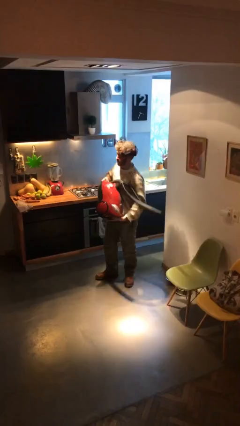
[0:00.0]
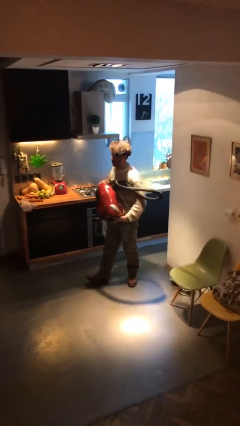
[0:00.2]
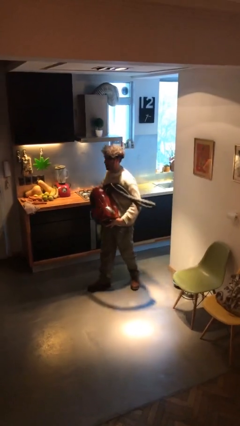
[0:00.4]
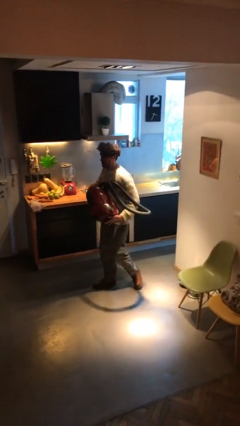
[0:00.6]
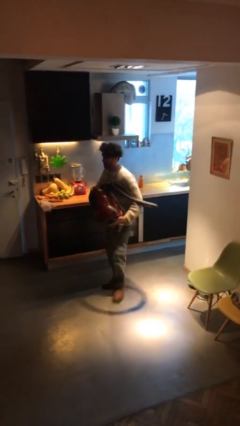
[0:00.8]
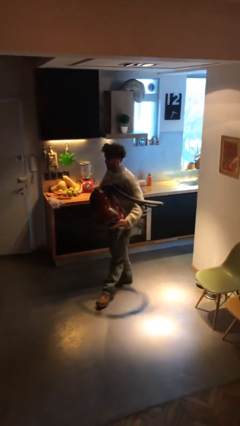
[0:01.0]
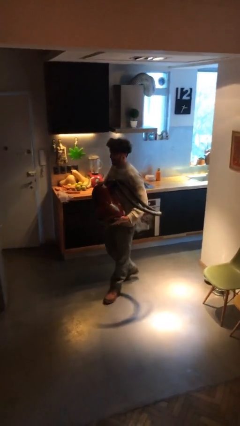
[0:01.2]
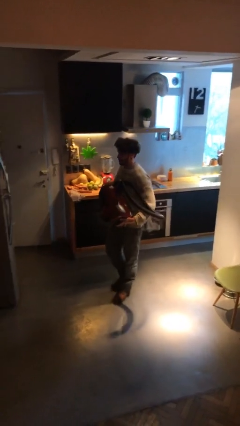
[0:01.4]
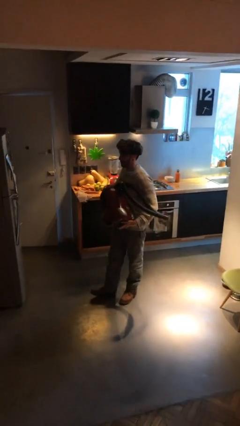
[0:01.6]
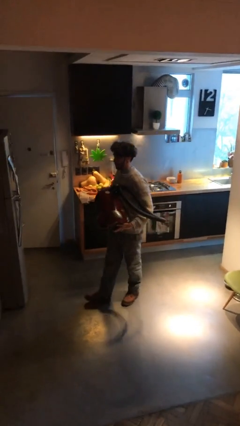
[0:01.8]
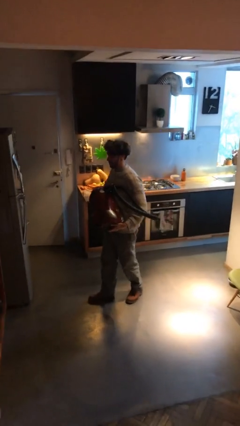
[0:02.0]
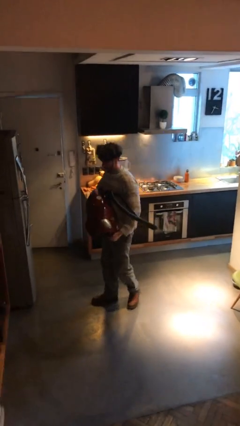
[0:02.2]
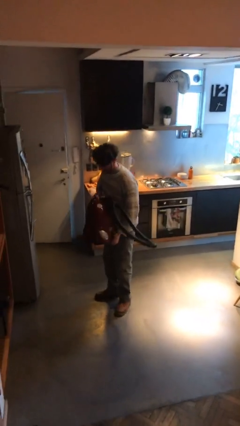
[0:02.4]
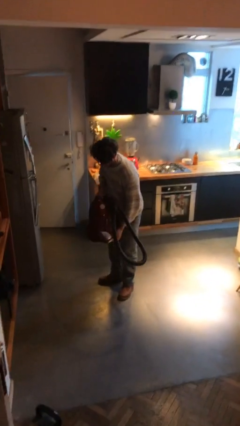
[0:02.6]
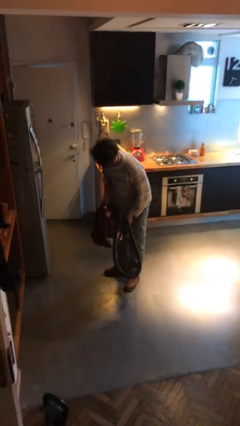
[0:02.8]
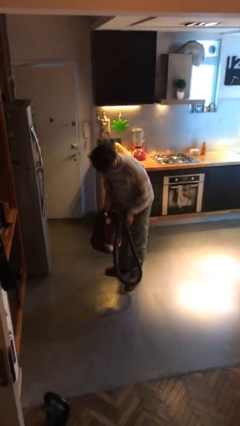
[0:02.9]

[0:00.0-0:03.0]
person carries heavy object

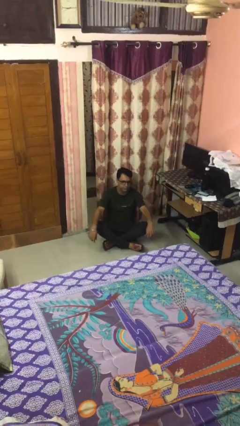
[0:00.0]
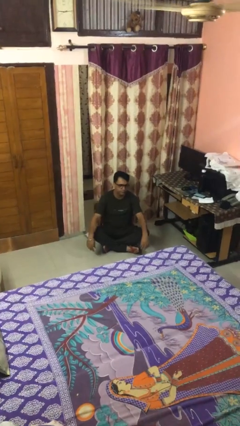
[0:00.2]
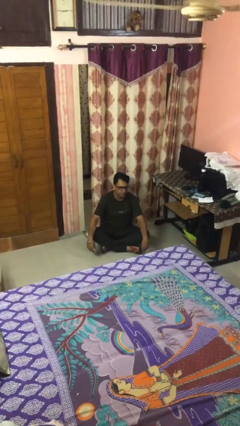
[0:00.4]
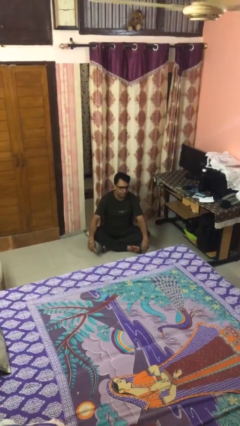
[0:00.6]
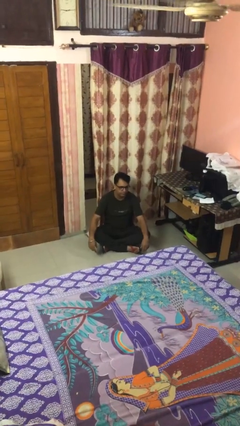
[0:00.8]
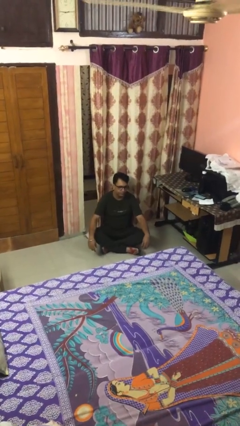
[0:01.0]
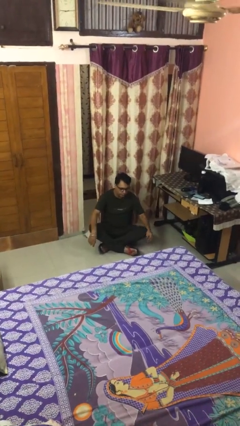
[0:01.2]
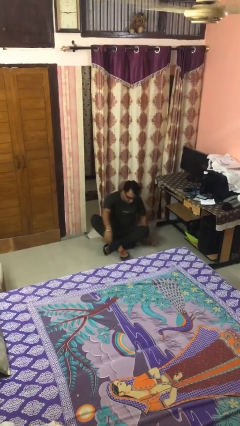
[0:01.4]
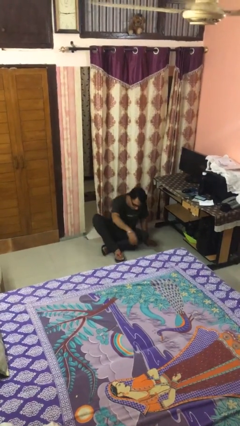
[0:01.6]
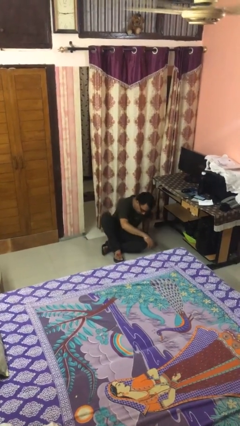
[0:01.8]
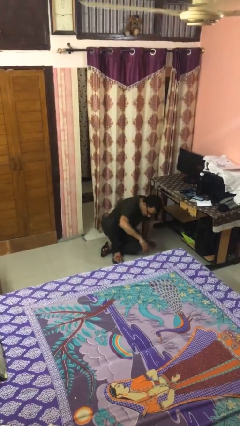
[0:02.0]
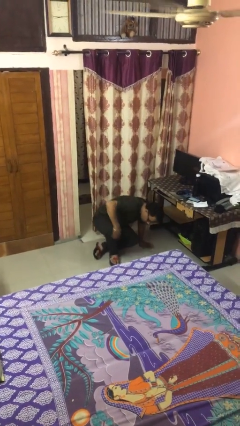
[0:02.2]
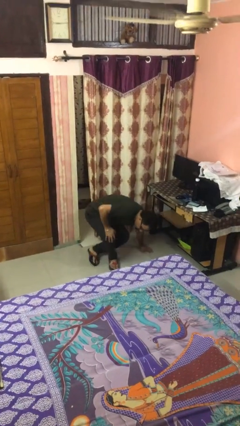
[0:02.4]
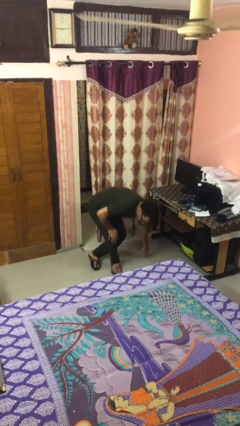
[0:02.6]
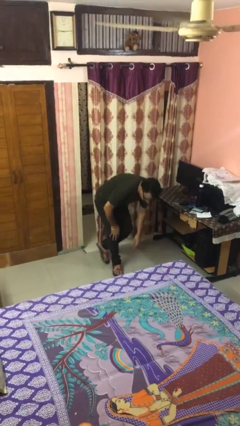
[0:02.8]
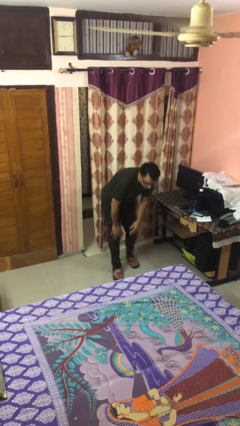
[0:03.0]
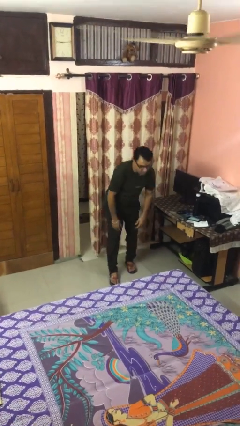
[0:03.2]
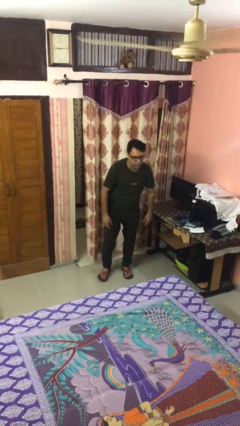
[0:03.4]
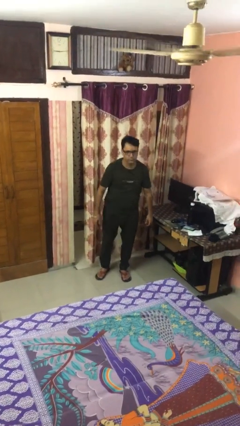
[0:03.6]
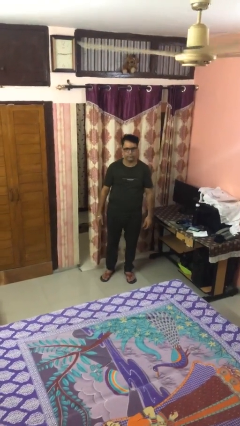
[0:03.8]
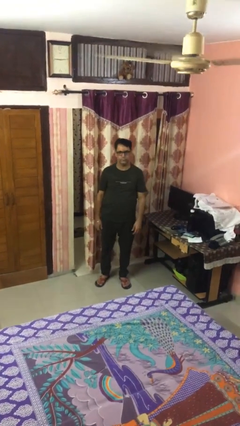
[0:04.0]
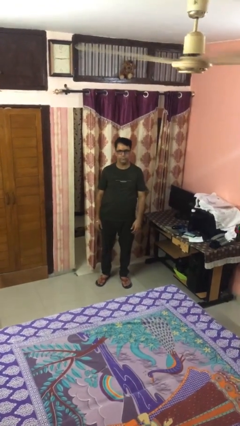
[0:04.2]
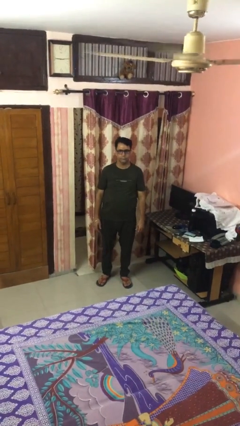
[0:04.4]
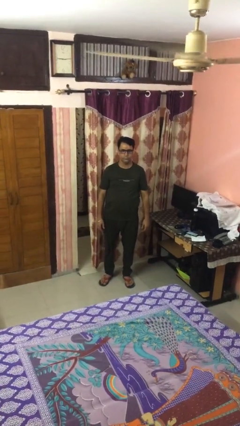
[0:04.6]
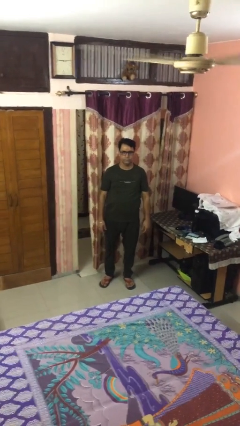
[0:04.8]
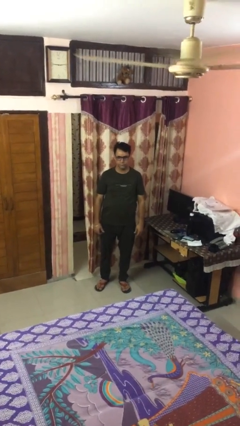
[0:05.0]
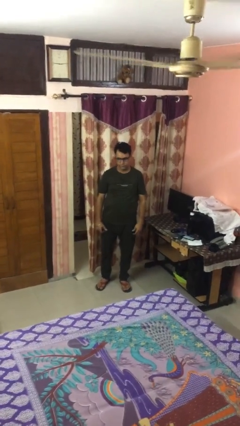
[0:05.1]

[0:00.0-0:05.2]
person stands up from floor

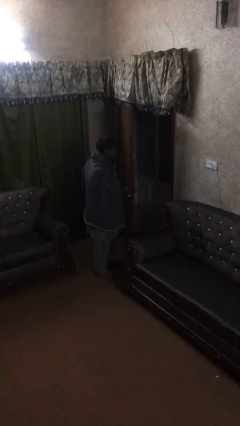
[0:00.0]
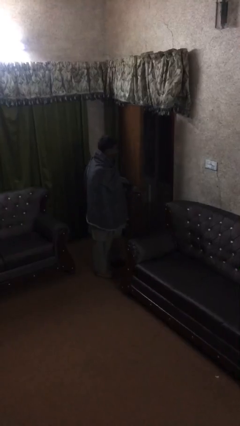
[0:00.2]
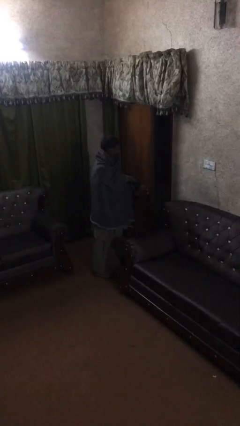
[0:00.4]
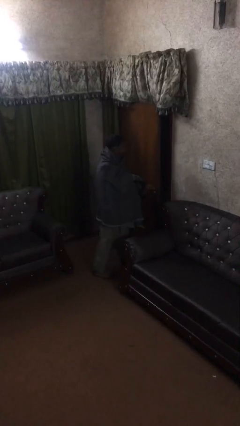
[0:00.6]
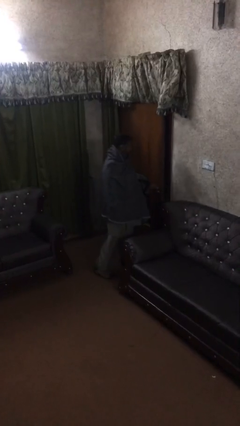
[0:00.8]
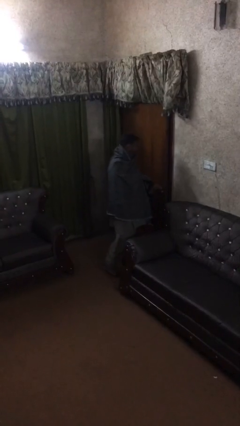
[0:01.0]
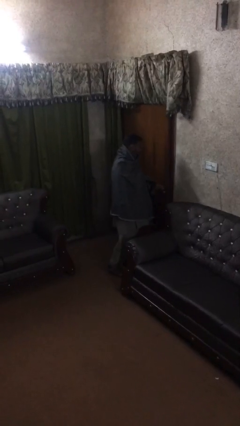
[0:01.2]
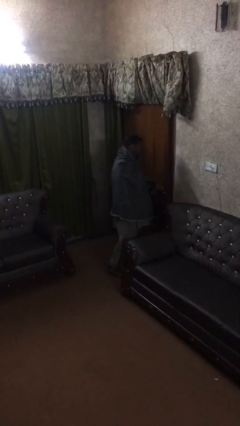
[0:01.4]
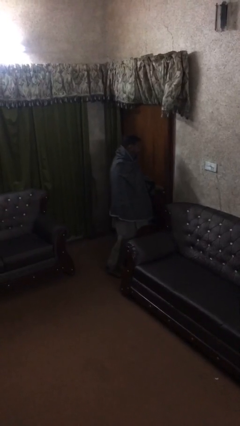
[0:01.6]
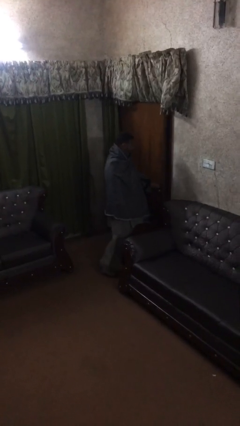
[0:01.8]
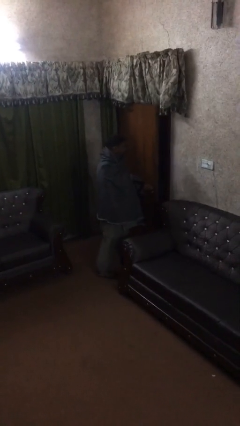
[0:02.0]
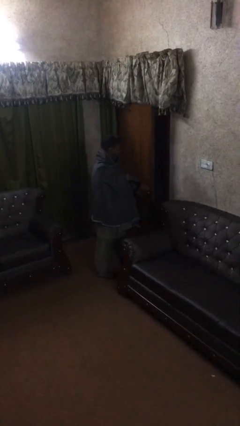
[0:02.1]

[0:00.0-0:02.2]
person closes facility door

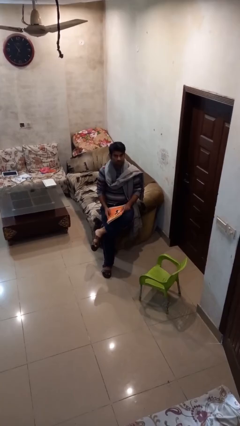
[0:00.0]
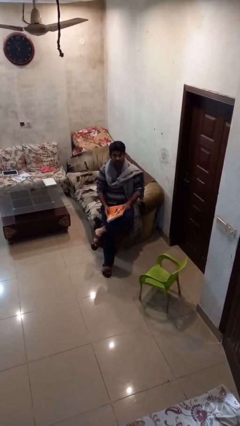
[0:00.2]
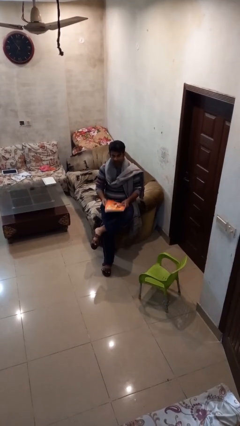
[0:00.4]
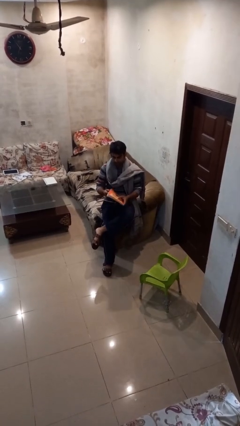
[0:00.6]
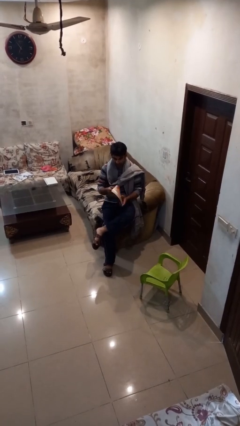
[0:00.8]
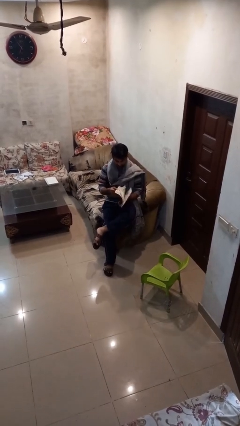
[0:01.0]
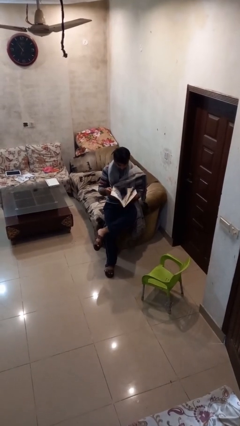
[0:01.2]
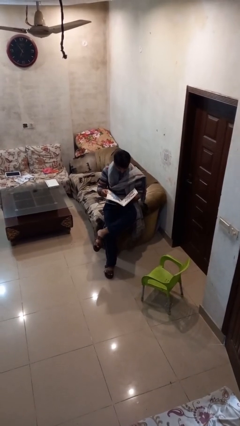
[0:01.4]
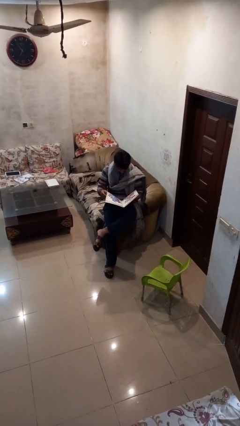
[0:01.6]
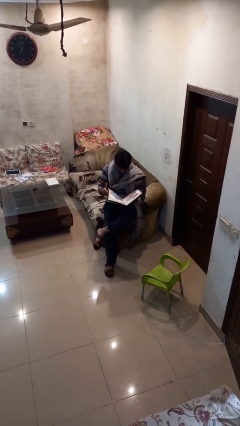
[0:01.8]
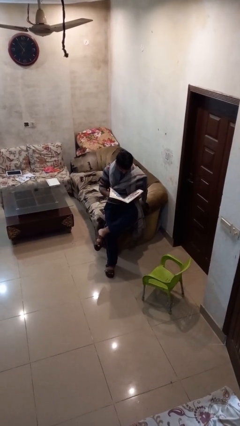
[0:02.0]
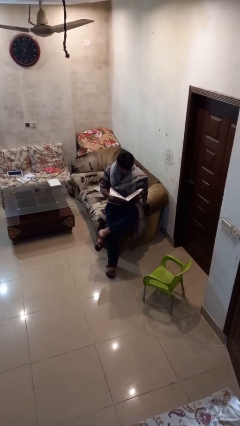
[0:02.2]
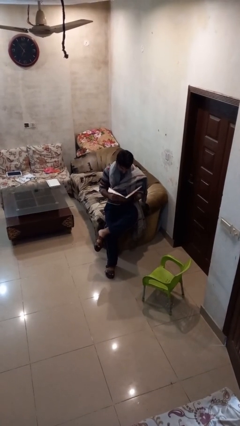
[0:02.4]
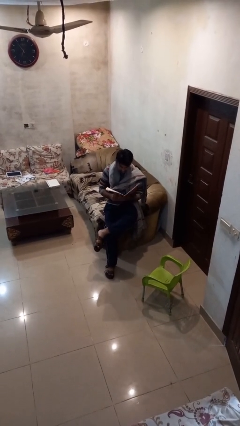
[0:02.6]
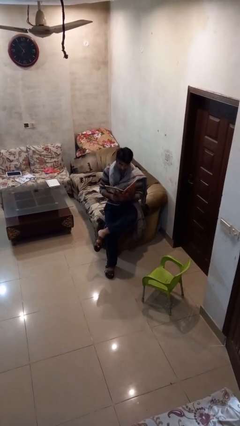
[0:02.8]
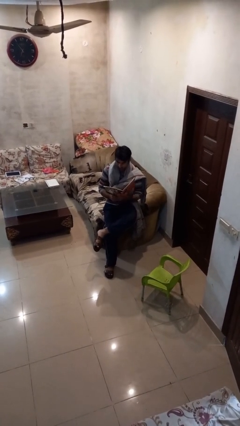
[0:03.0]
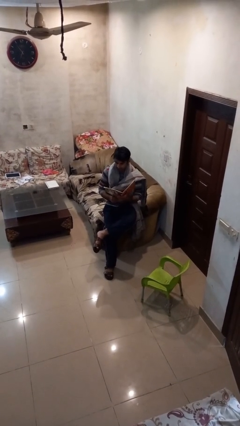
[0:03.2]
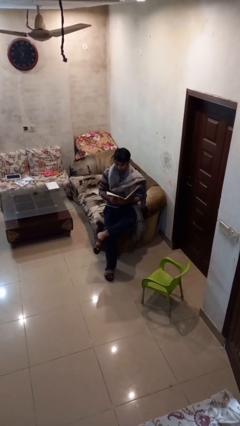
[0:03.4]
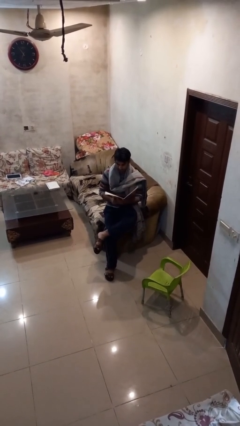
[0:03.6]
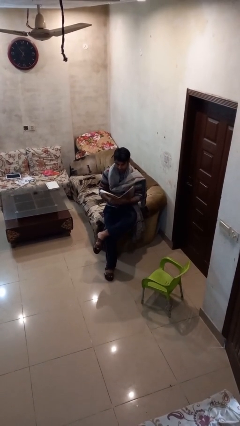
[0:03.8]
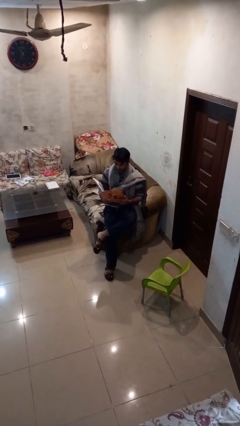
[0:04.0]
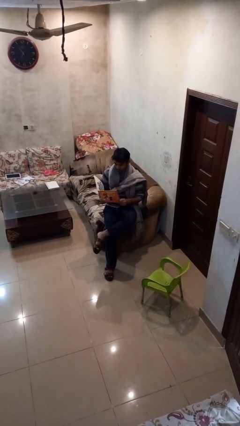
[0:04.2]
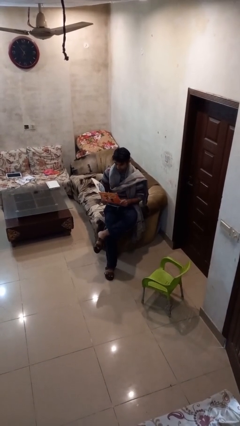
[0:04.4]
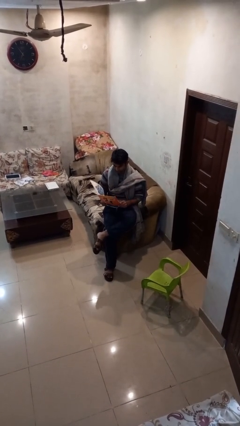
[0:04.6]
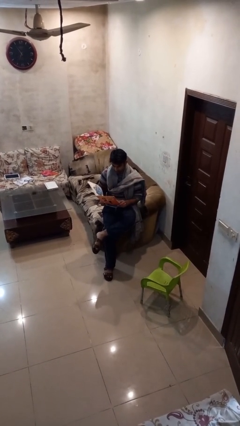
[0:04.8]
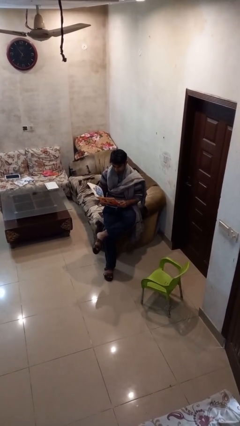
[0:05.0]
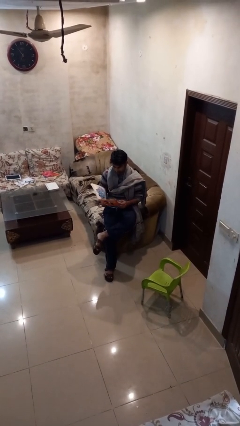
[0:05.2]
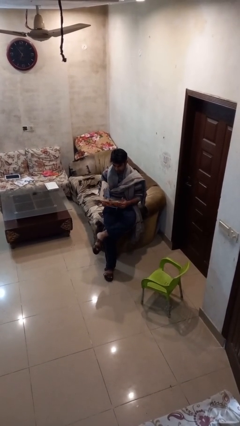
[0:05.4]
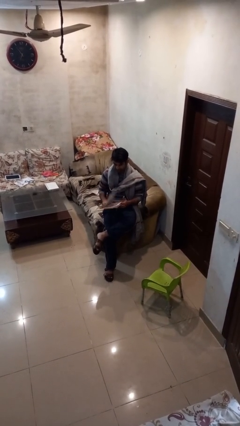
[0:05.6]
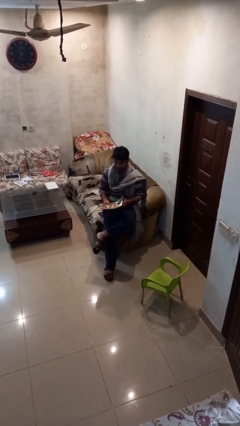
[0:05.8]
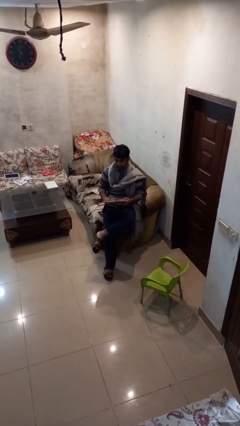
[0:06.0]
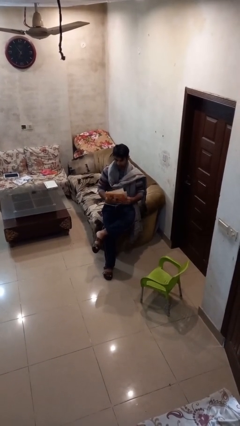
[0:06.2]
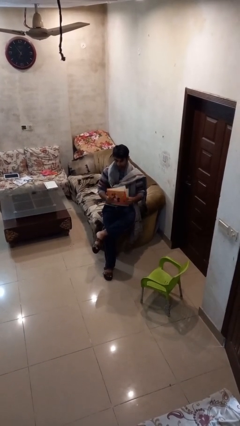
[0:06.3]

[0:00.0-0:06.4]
person reads document

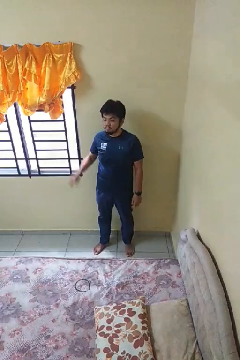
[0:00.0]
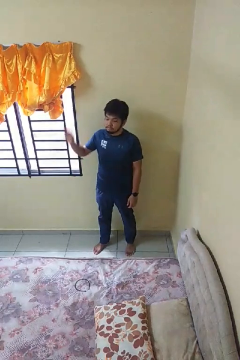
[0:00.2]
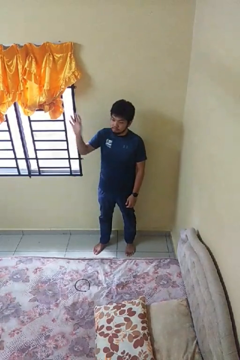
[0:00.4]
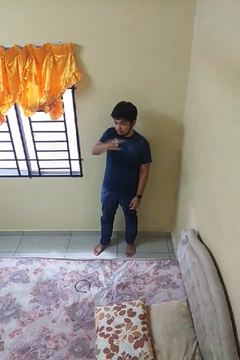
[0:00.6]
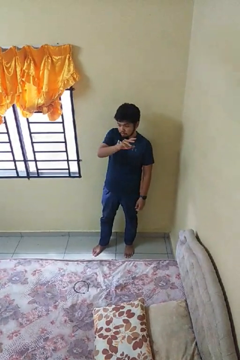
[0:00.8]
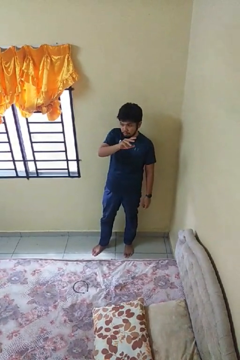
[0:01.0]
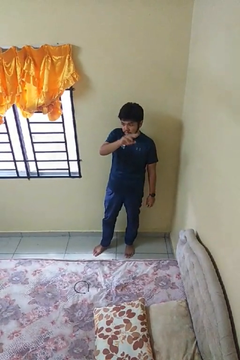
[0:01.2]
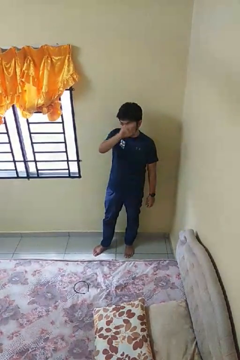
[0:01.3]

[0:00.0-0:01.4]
person gestures swipe left
